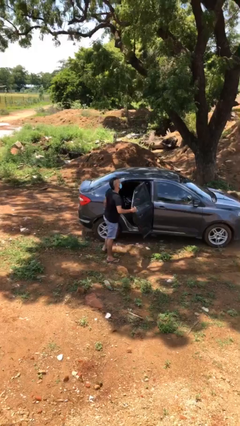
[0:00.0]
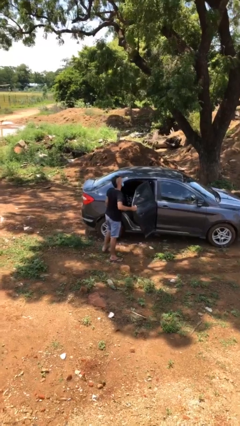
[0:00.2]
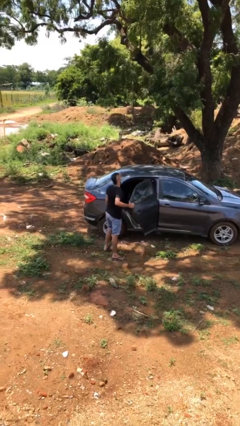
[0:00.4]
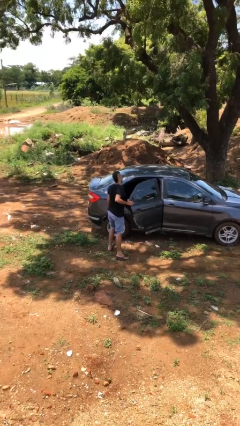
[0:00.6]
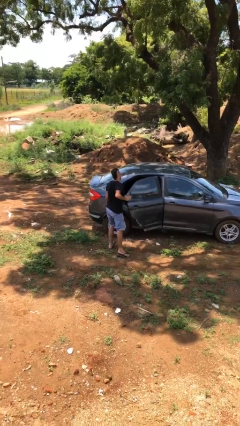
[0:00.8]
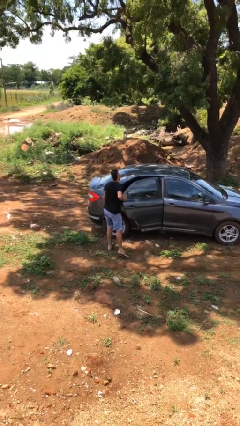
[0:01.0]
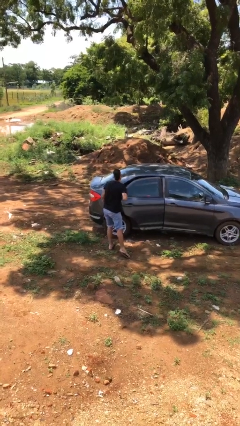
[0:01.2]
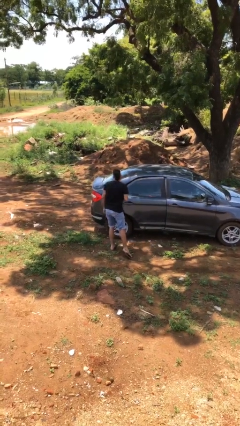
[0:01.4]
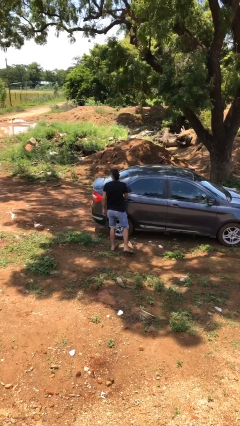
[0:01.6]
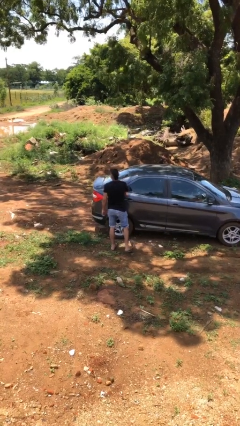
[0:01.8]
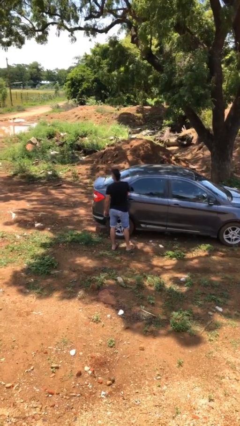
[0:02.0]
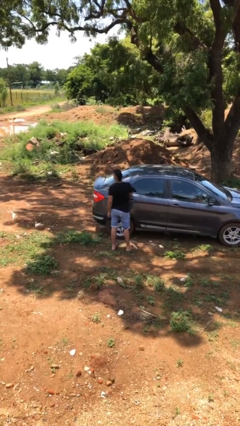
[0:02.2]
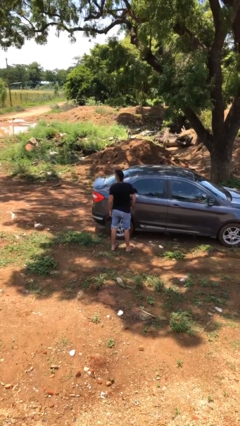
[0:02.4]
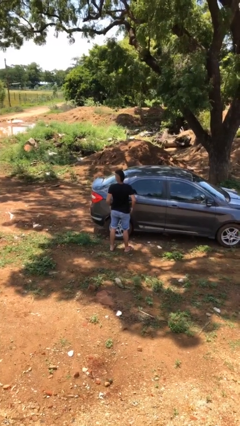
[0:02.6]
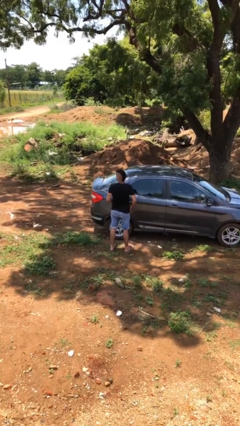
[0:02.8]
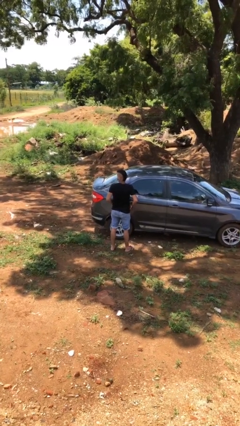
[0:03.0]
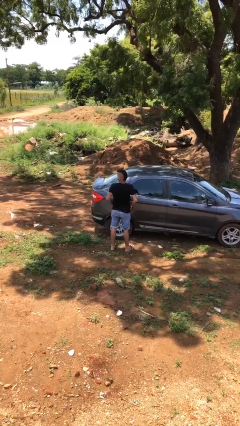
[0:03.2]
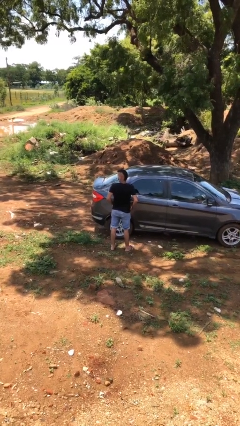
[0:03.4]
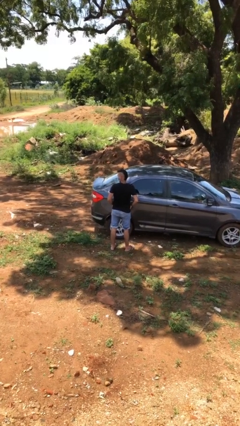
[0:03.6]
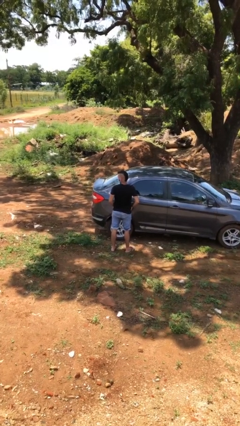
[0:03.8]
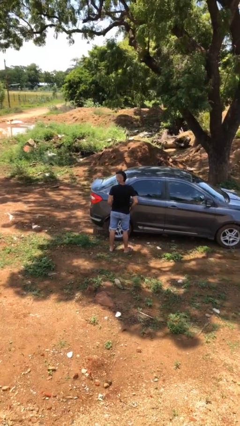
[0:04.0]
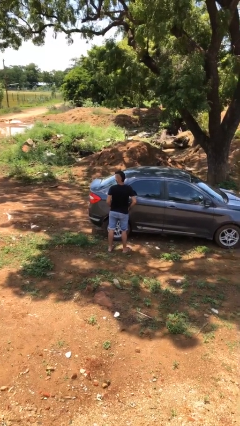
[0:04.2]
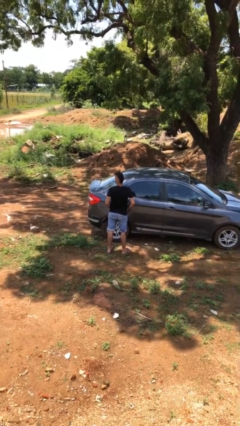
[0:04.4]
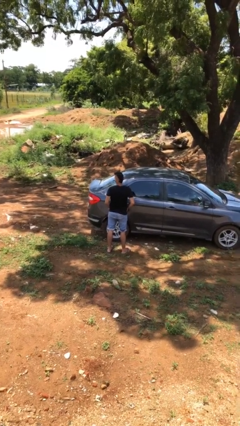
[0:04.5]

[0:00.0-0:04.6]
person closes car door

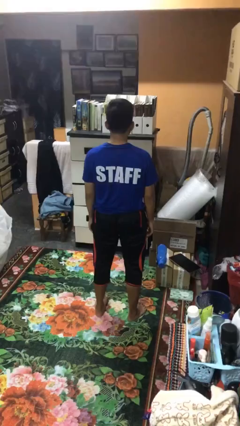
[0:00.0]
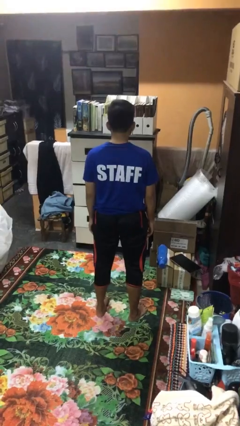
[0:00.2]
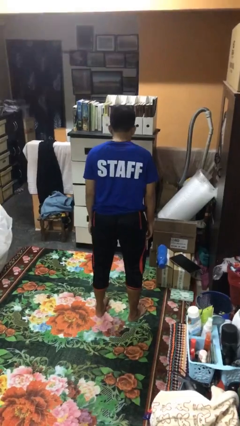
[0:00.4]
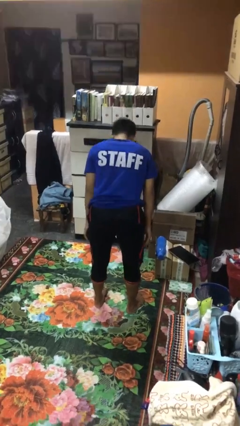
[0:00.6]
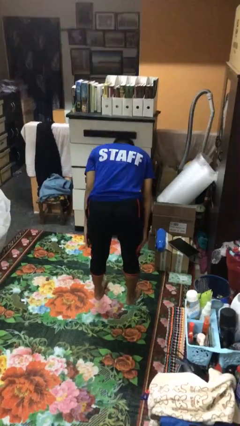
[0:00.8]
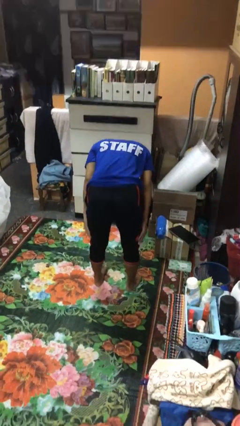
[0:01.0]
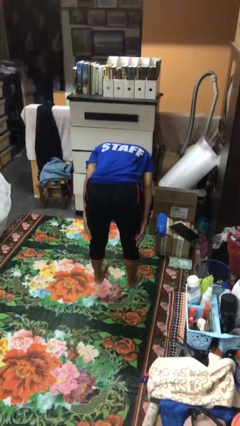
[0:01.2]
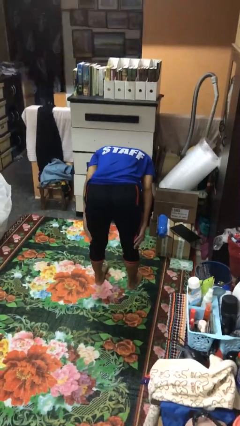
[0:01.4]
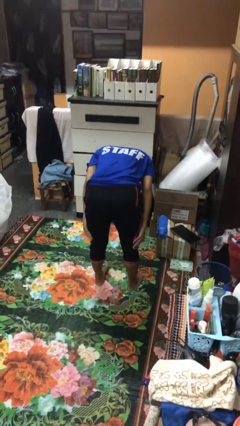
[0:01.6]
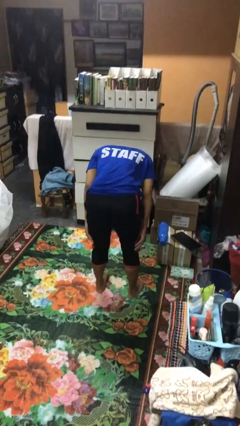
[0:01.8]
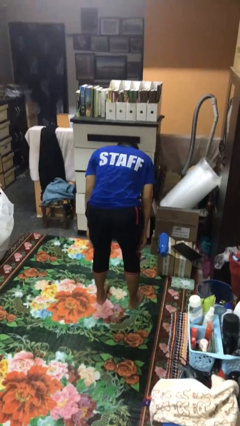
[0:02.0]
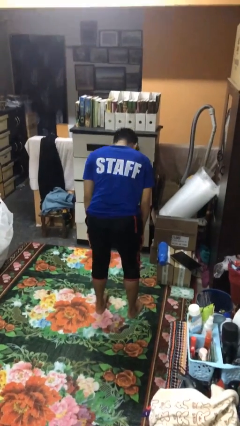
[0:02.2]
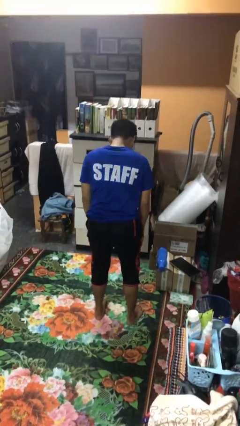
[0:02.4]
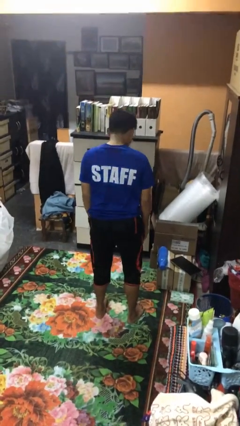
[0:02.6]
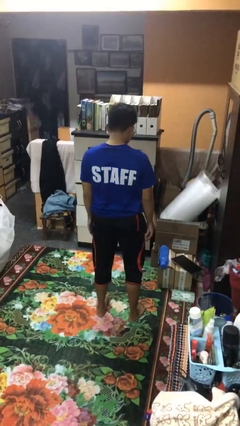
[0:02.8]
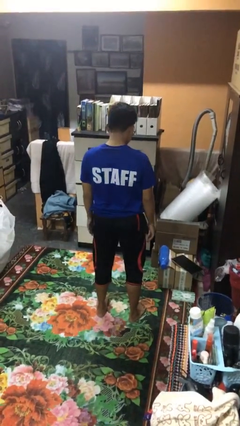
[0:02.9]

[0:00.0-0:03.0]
person bows

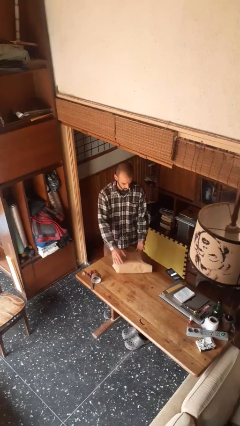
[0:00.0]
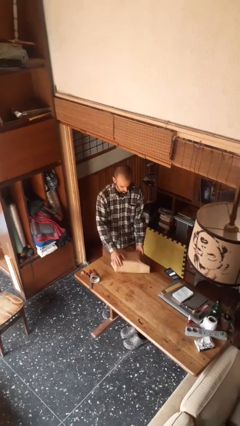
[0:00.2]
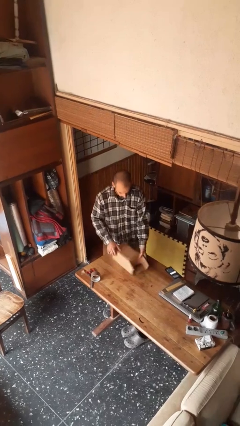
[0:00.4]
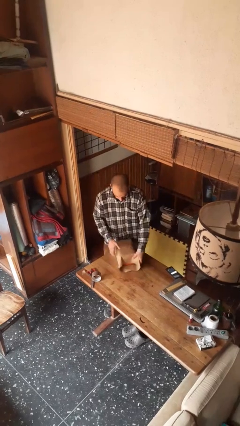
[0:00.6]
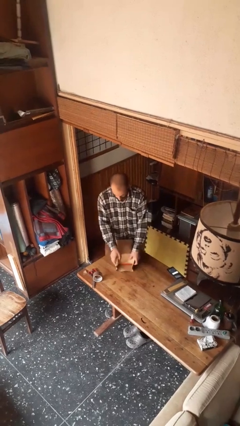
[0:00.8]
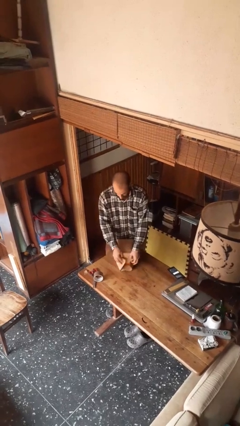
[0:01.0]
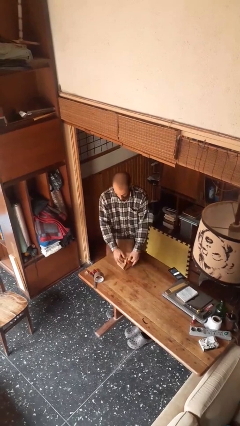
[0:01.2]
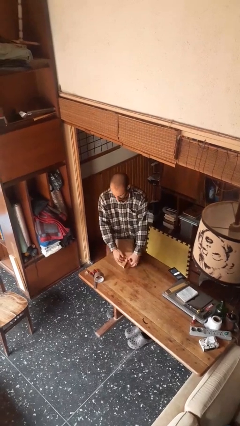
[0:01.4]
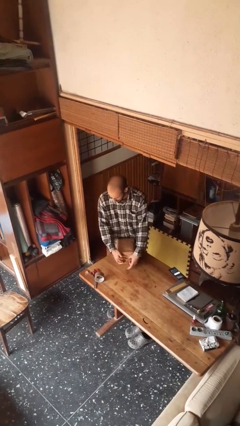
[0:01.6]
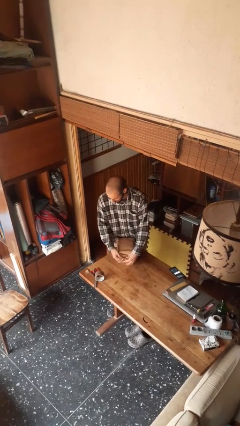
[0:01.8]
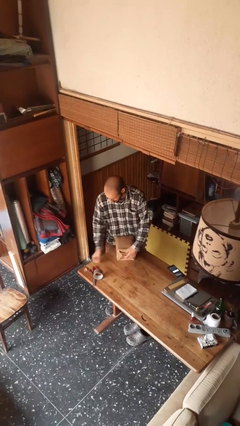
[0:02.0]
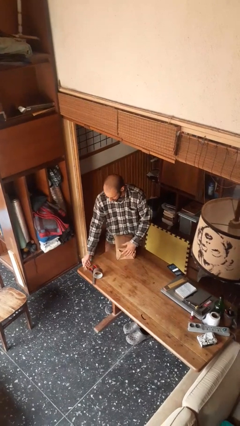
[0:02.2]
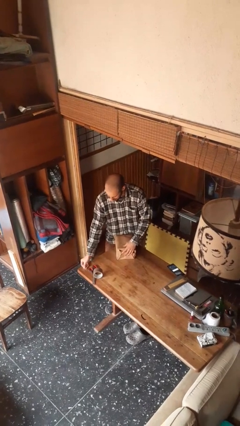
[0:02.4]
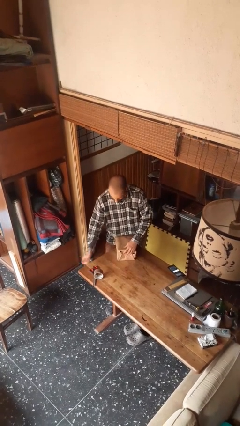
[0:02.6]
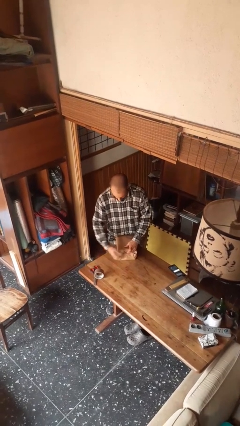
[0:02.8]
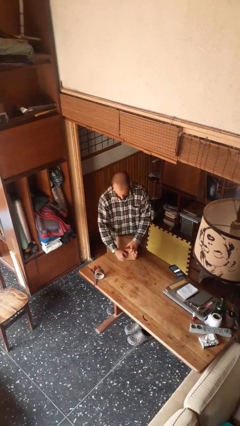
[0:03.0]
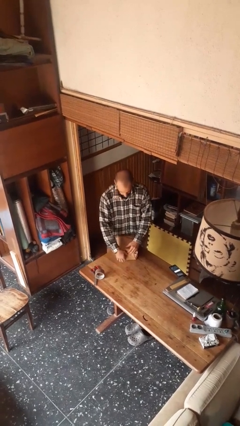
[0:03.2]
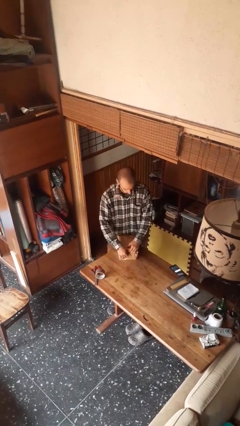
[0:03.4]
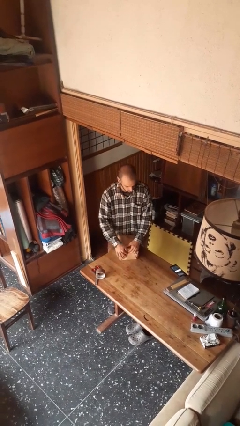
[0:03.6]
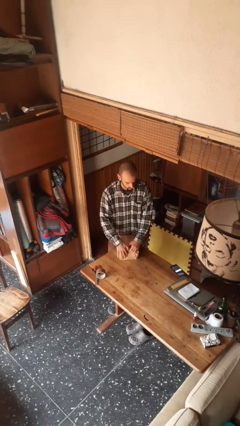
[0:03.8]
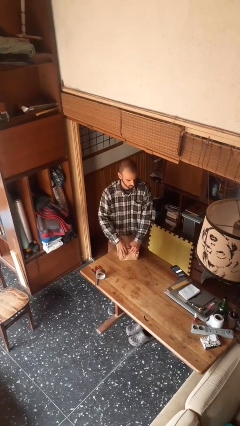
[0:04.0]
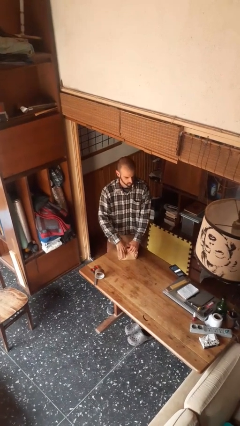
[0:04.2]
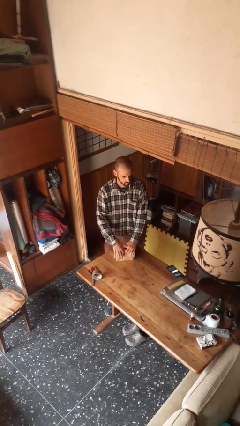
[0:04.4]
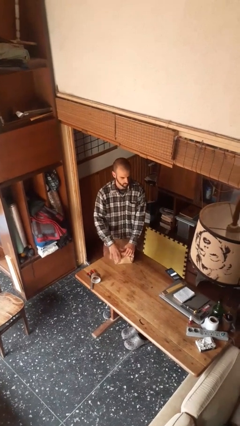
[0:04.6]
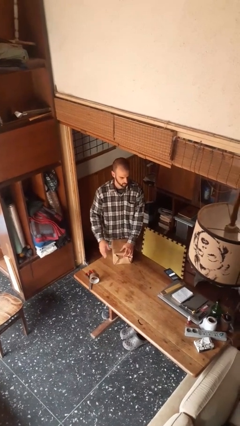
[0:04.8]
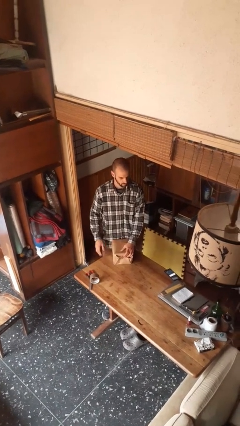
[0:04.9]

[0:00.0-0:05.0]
person wraps box

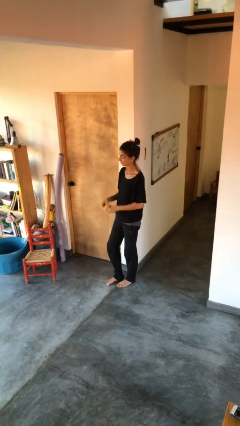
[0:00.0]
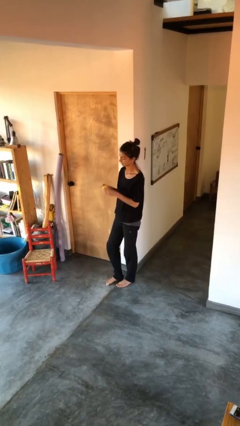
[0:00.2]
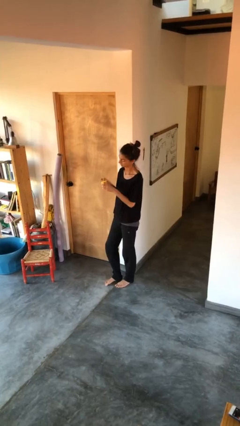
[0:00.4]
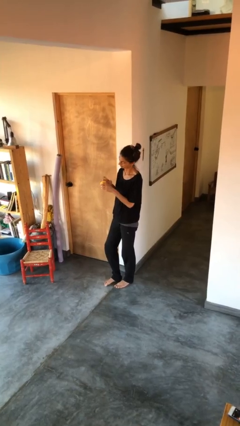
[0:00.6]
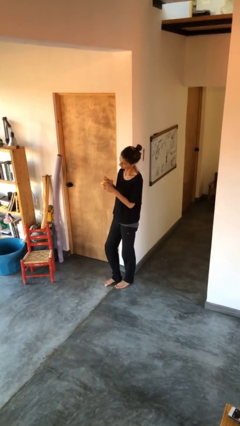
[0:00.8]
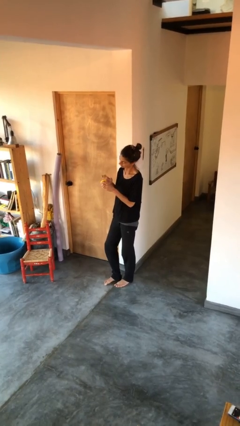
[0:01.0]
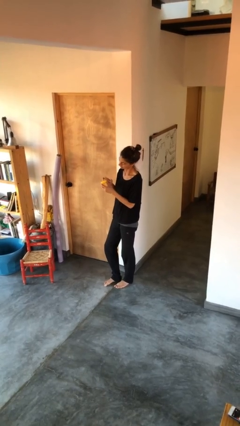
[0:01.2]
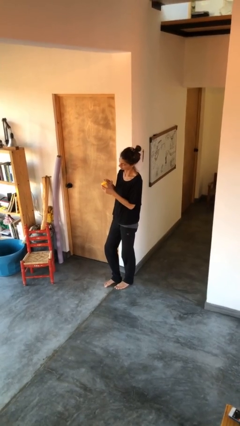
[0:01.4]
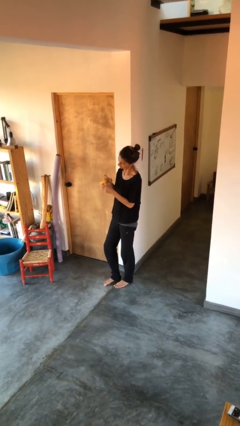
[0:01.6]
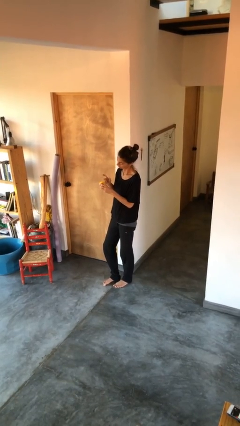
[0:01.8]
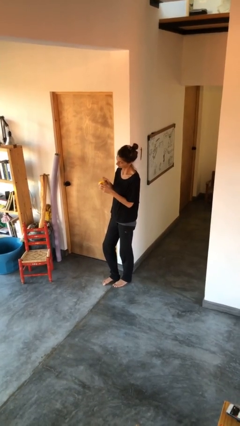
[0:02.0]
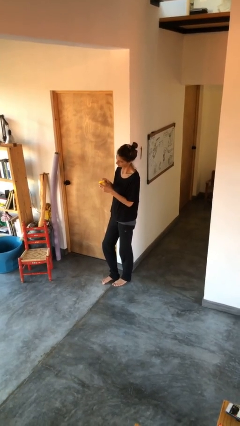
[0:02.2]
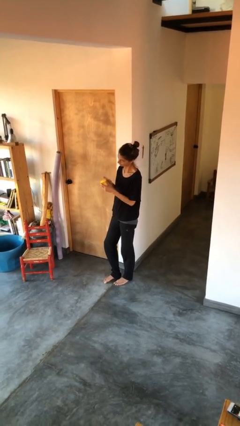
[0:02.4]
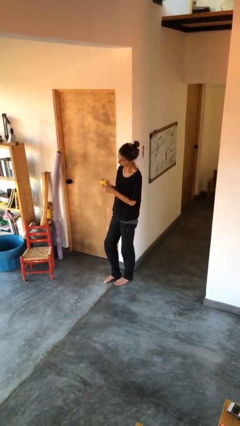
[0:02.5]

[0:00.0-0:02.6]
person taps object with finger

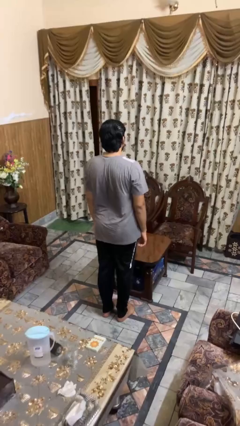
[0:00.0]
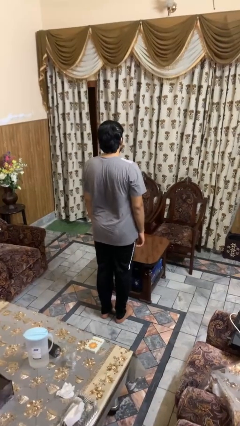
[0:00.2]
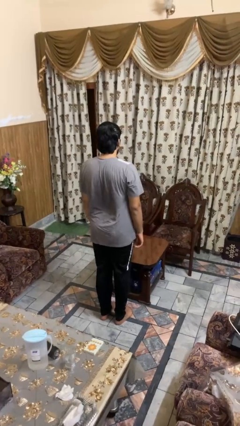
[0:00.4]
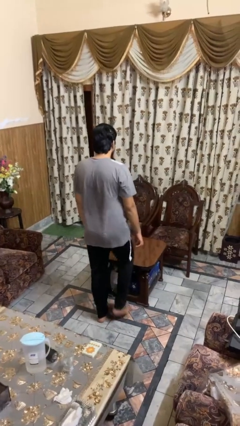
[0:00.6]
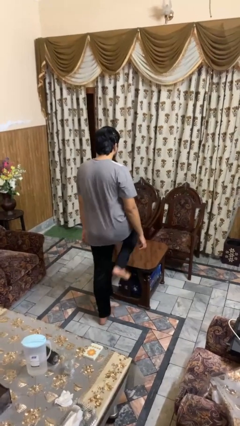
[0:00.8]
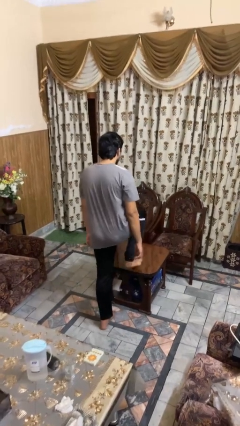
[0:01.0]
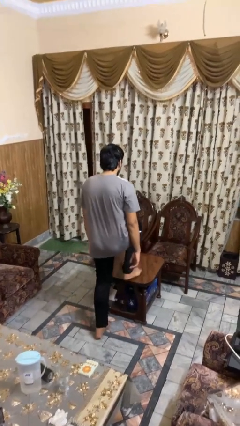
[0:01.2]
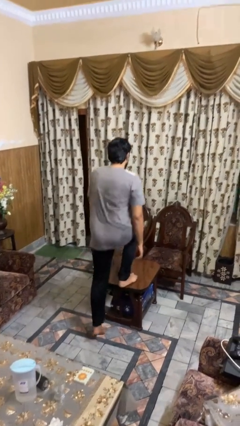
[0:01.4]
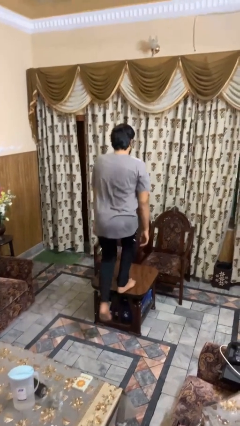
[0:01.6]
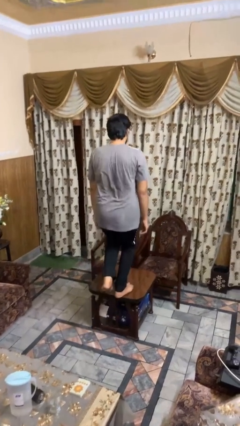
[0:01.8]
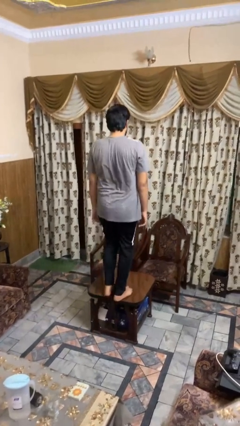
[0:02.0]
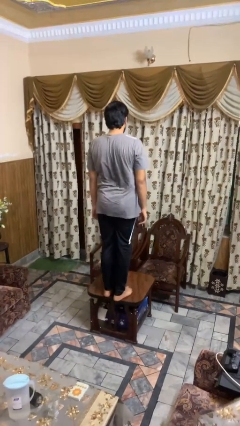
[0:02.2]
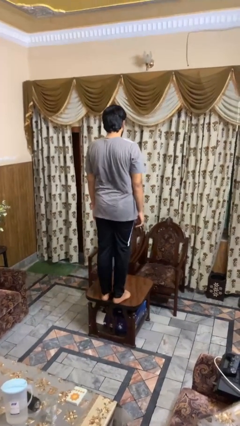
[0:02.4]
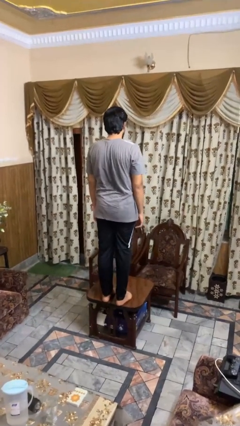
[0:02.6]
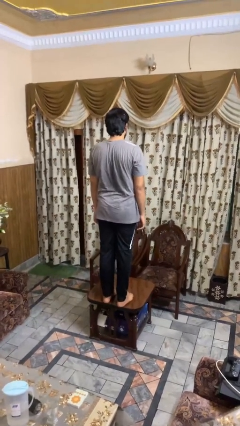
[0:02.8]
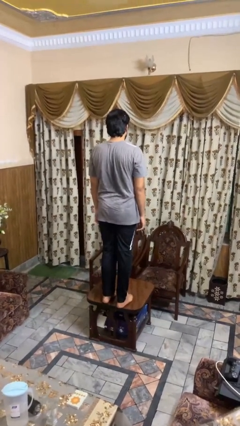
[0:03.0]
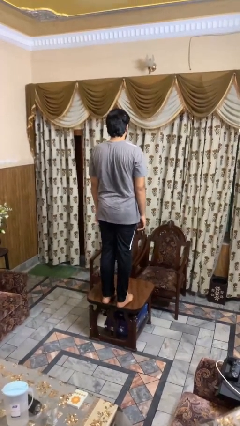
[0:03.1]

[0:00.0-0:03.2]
person climbs on table
